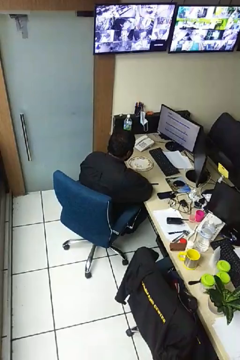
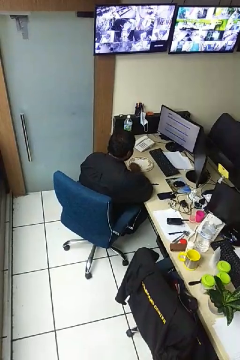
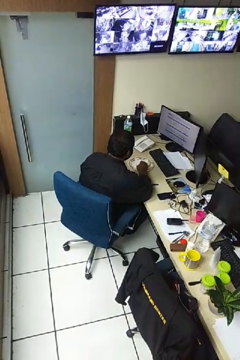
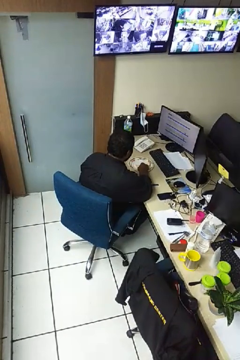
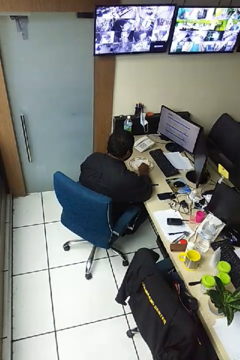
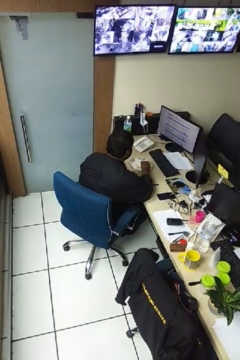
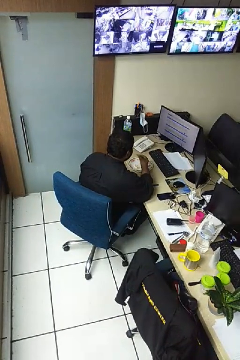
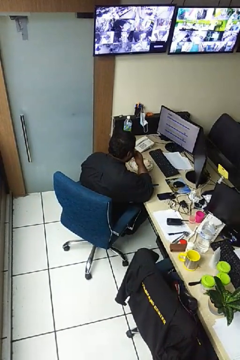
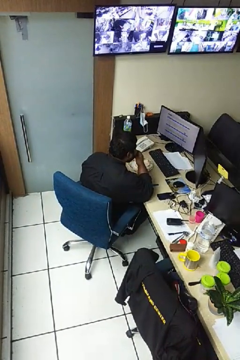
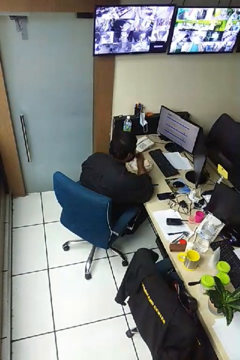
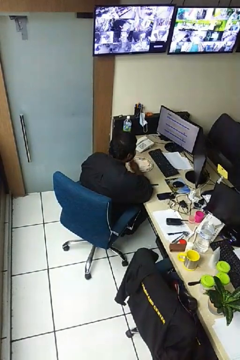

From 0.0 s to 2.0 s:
person eats with hands

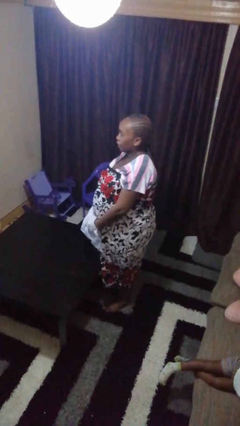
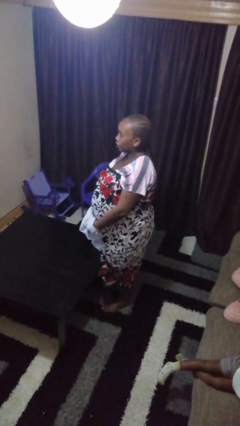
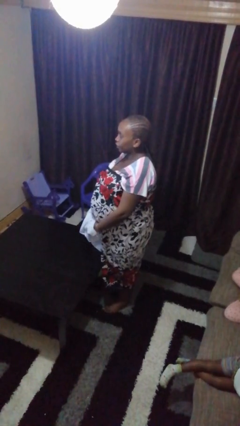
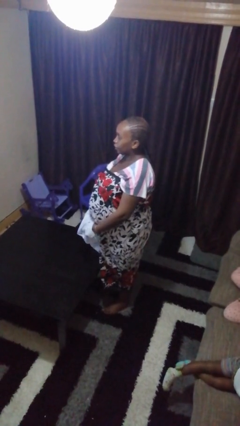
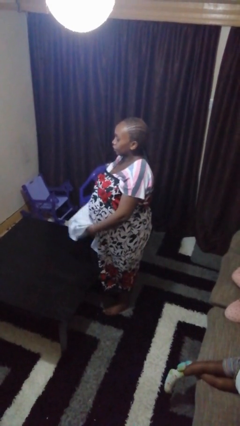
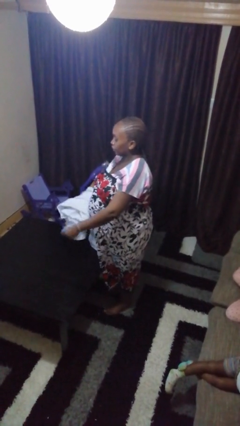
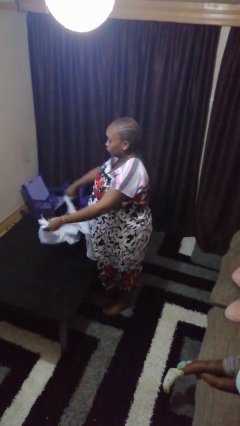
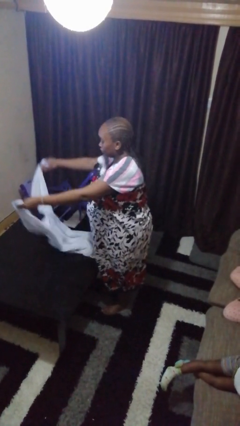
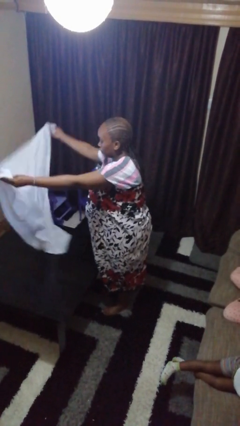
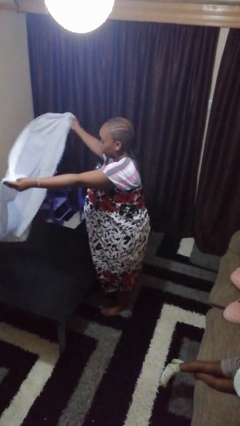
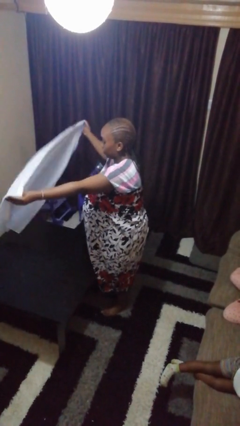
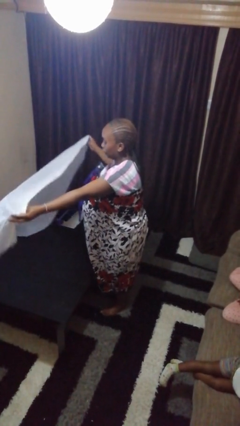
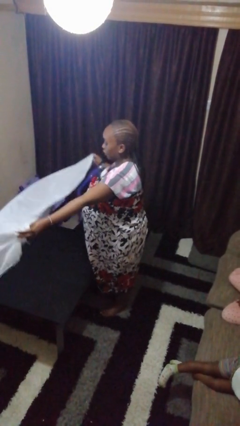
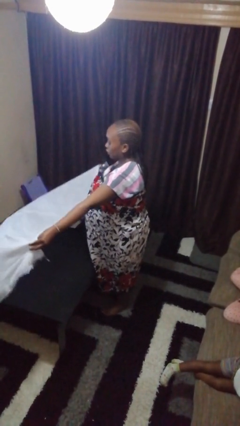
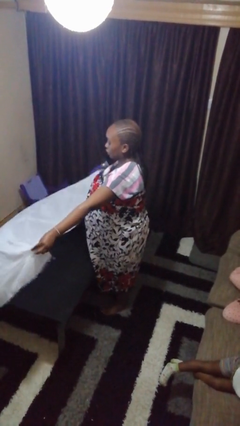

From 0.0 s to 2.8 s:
person spreads tablecloth

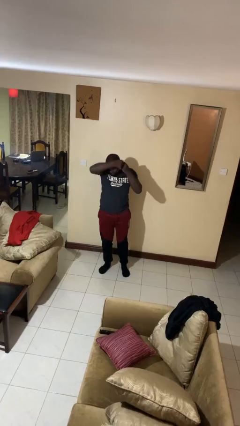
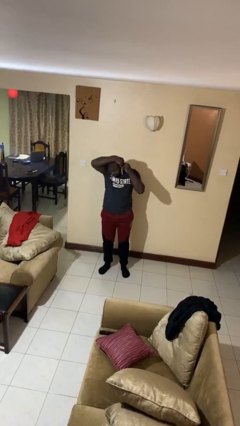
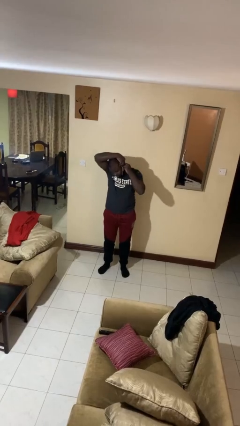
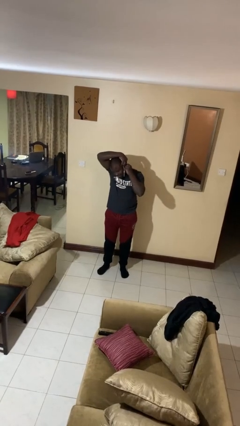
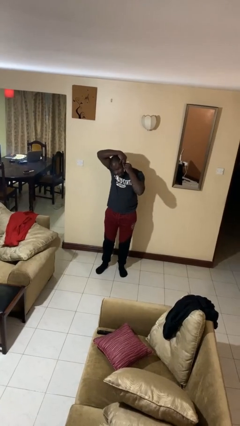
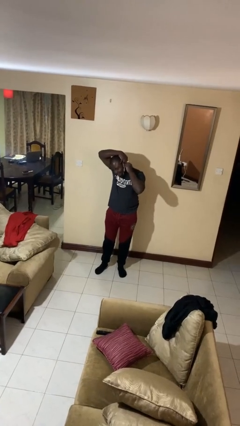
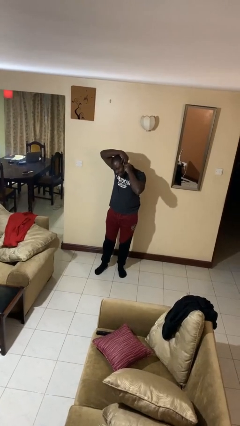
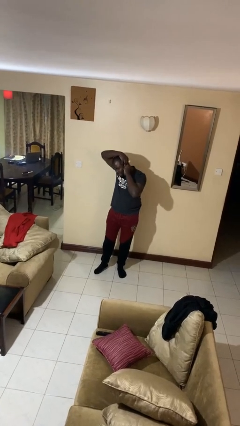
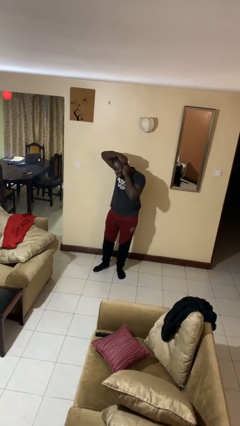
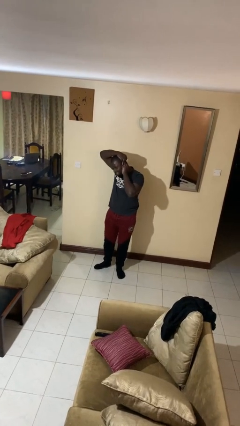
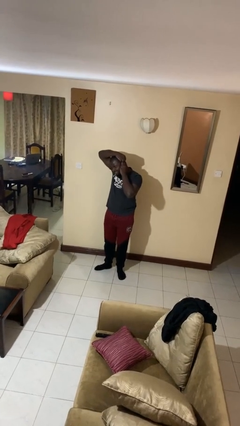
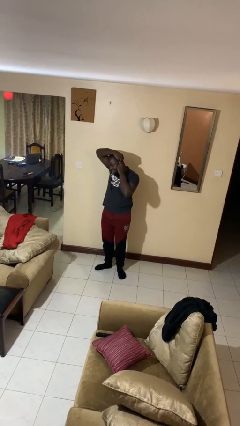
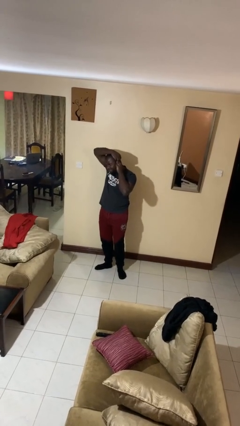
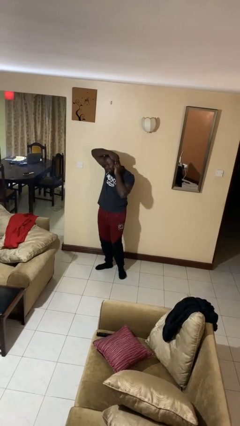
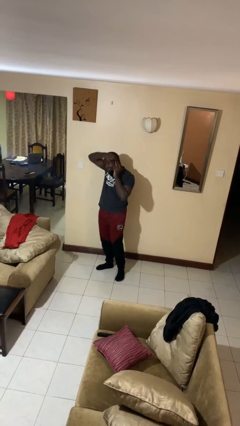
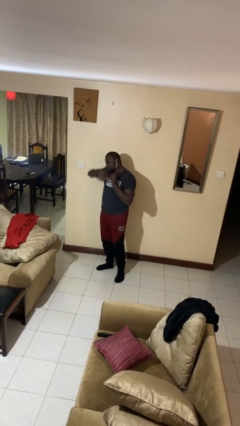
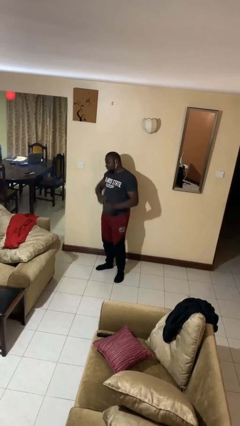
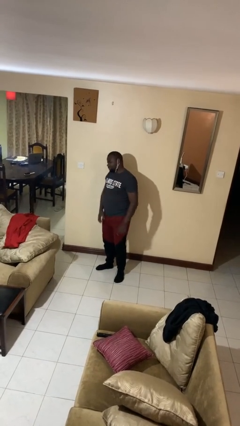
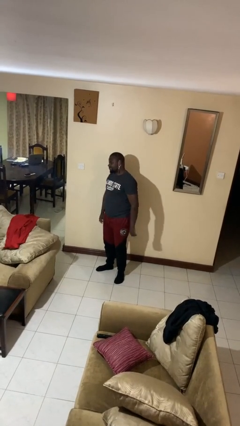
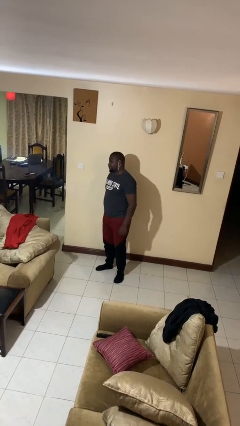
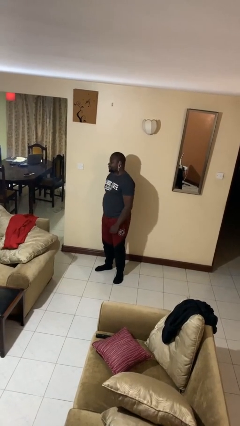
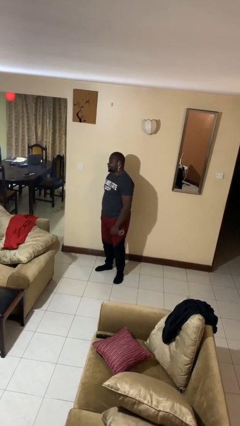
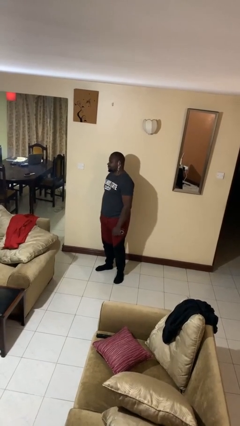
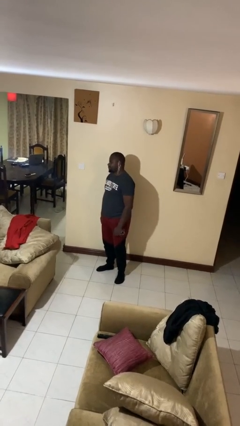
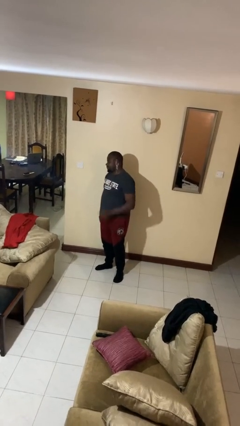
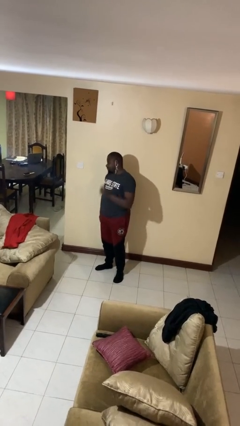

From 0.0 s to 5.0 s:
person puts on earrings

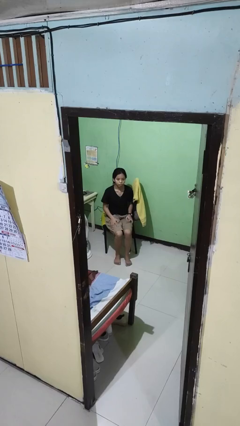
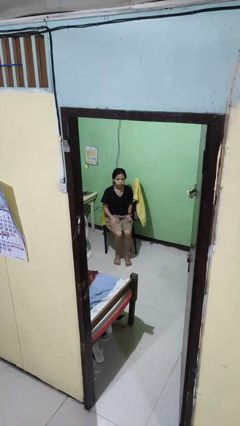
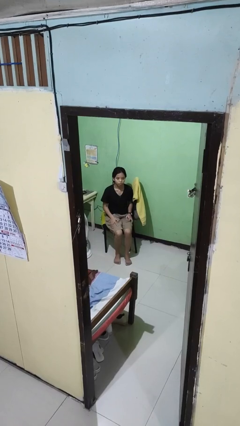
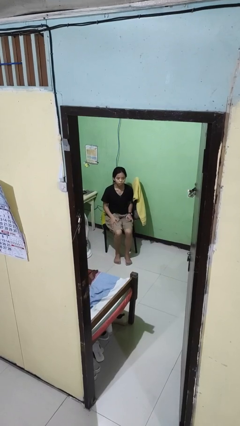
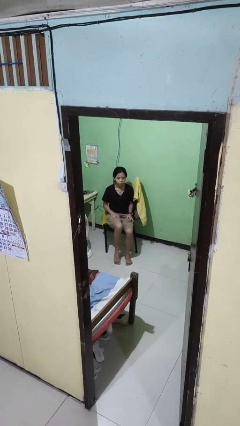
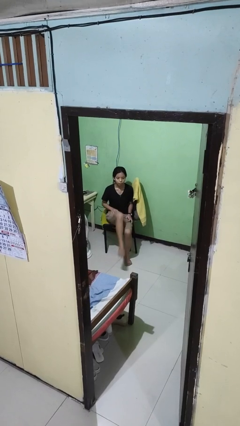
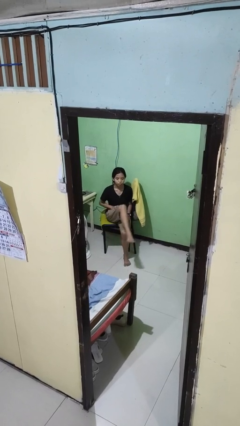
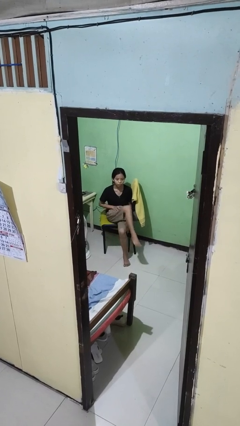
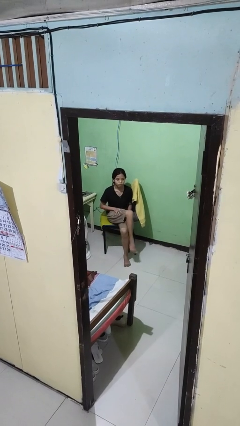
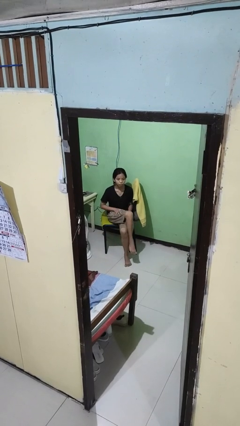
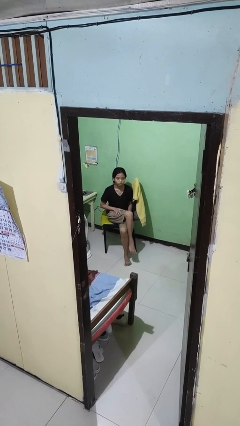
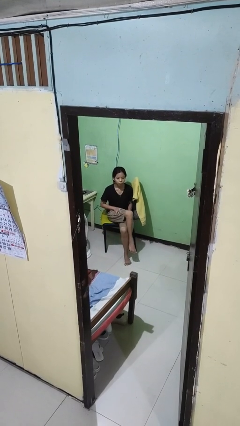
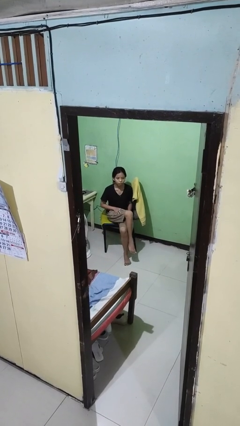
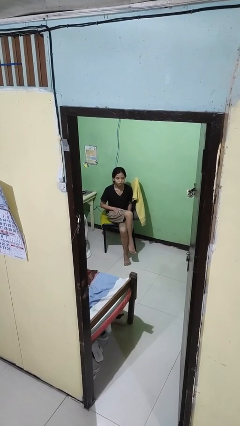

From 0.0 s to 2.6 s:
person crosses legs

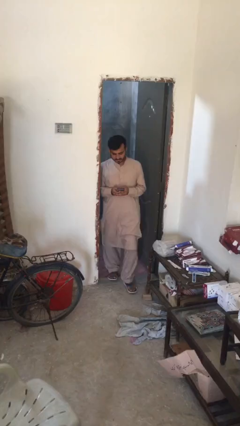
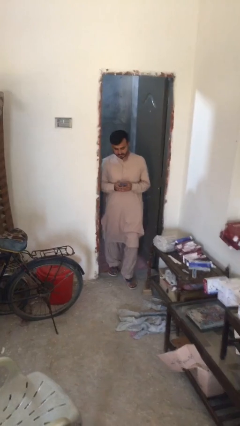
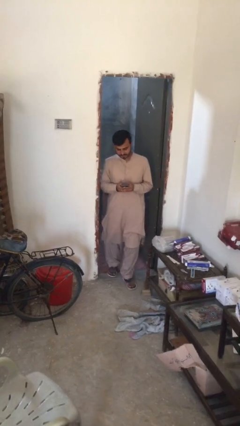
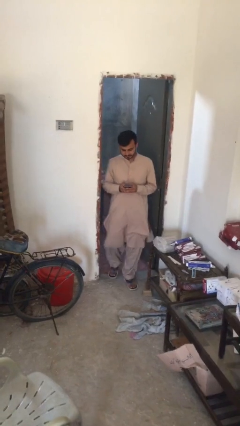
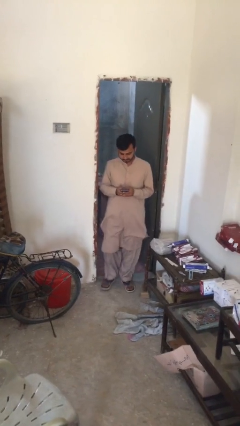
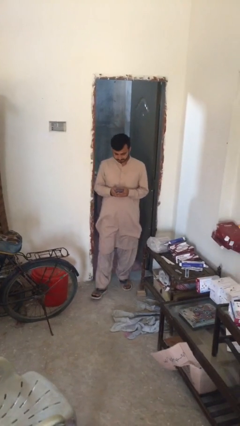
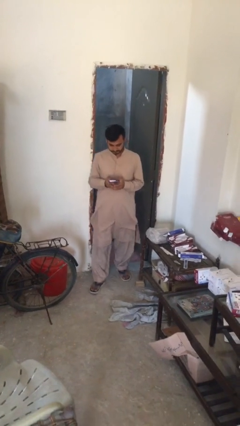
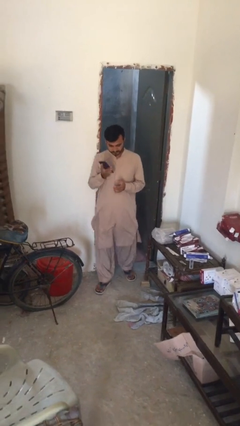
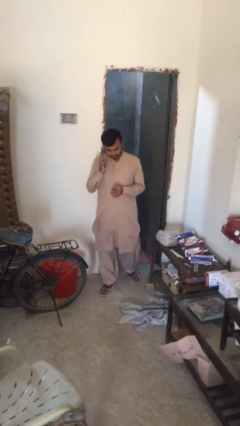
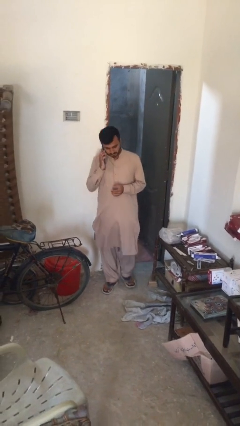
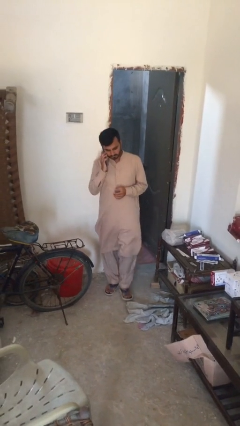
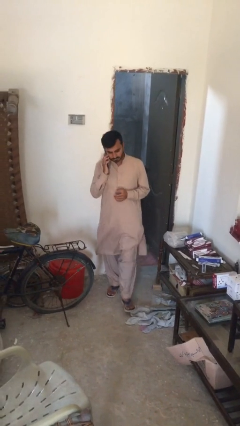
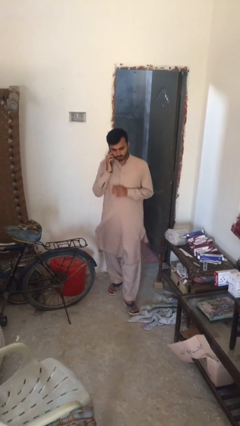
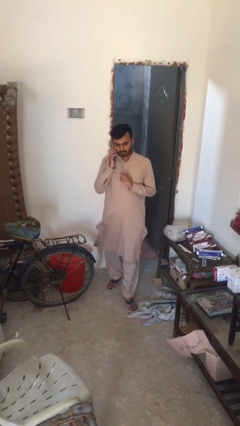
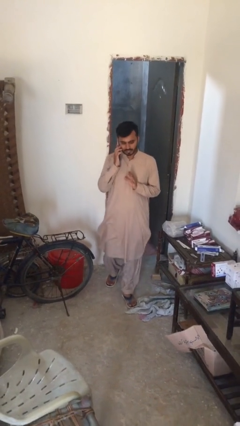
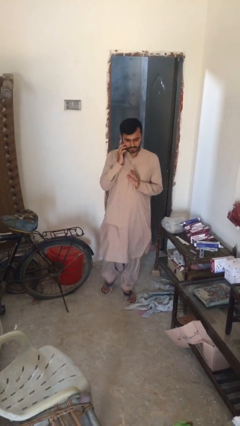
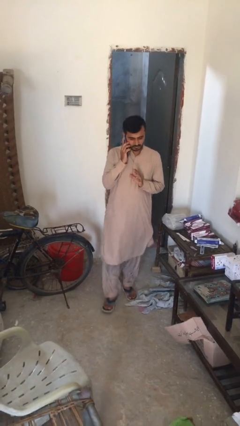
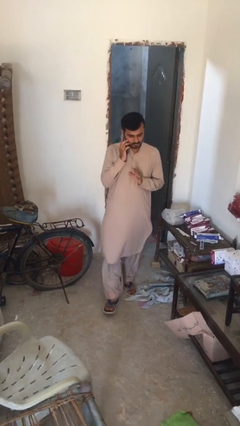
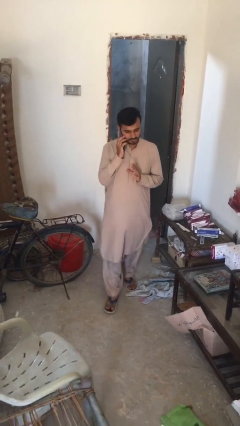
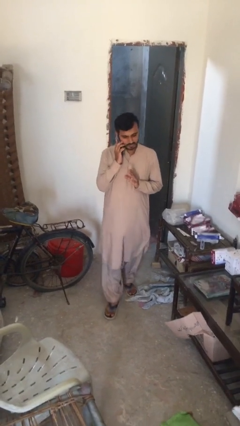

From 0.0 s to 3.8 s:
person talks on phone

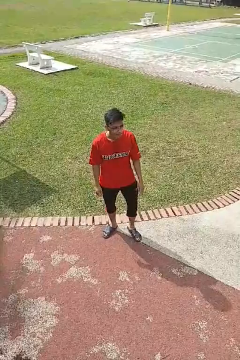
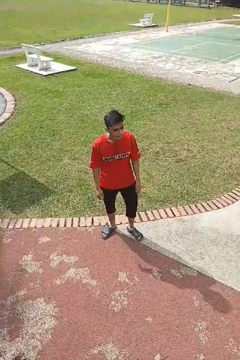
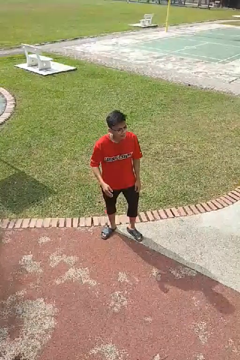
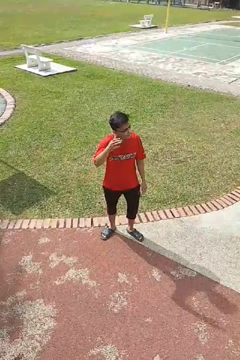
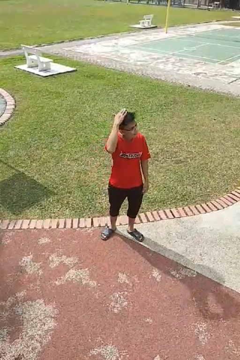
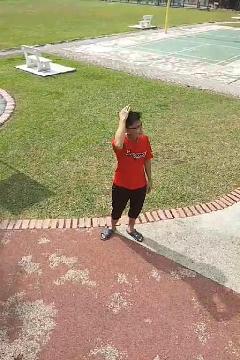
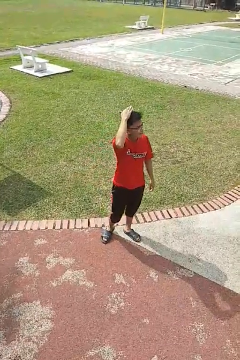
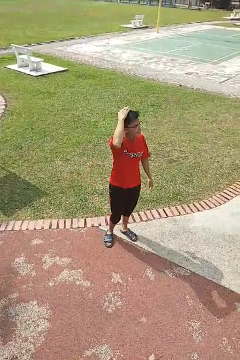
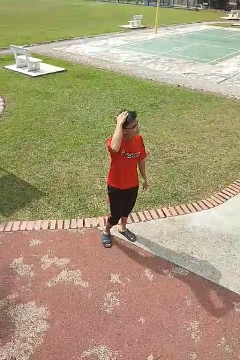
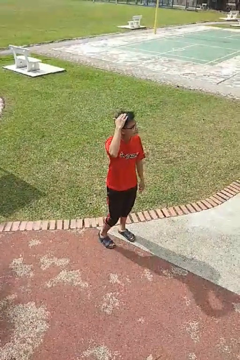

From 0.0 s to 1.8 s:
person pats head
